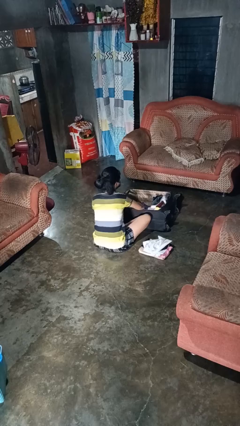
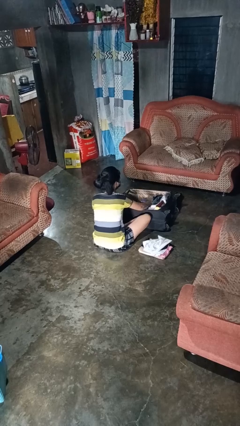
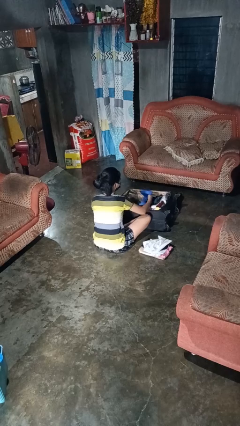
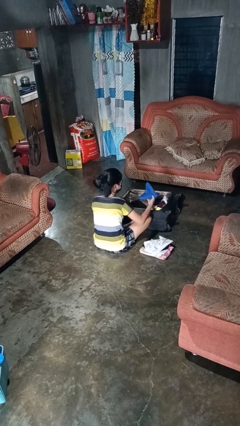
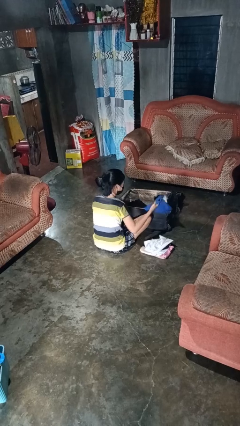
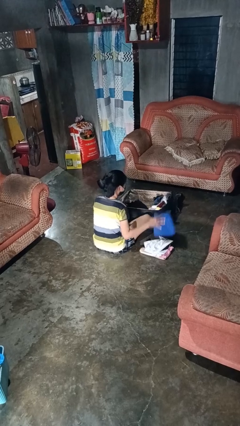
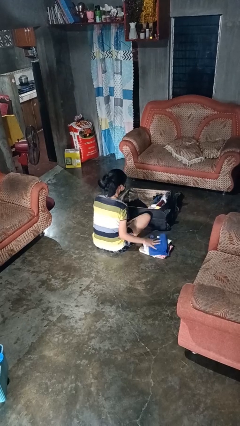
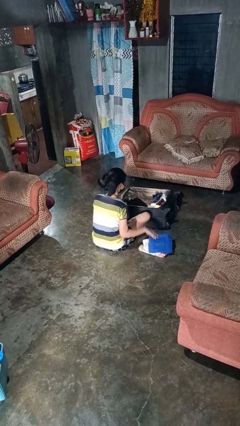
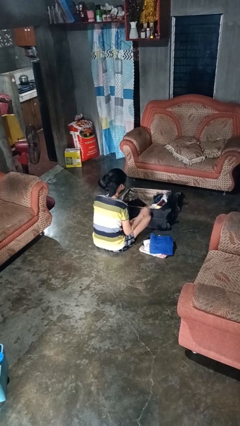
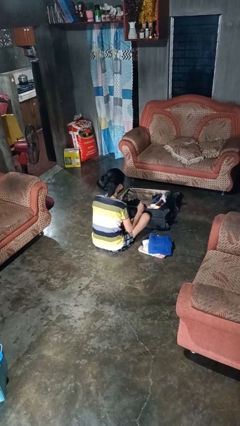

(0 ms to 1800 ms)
person unloads clothes from suitcase

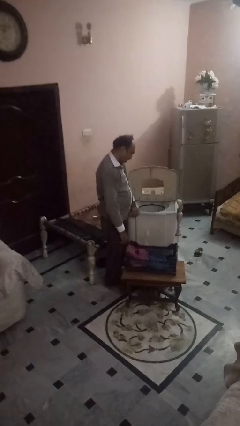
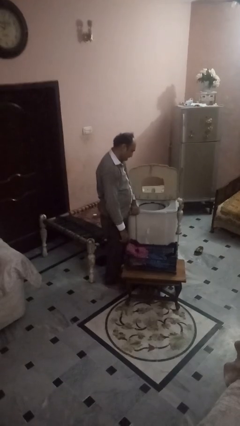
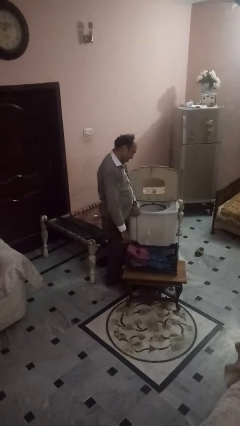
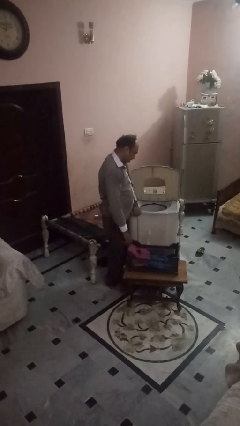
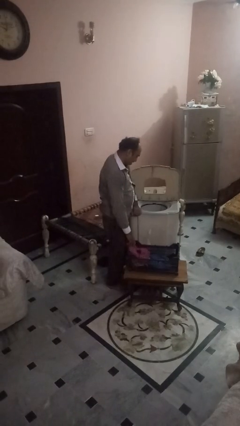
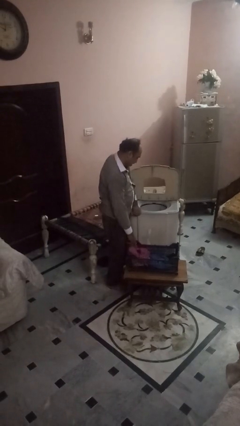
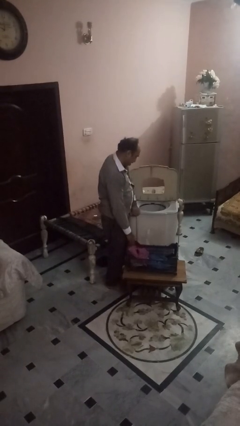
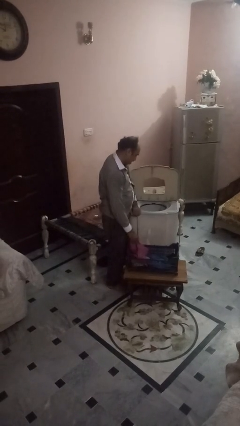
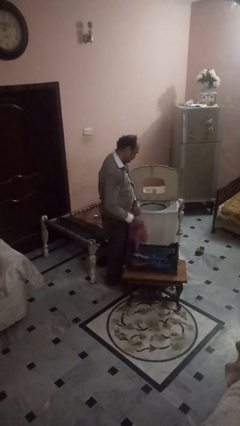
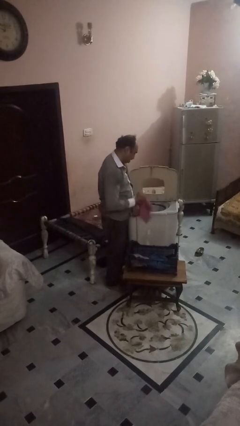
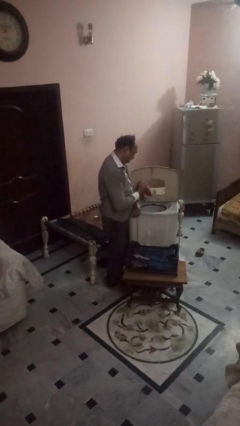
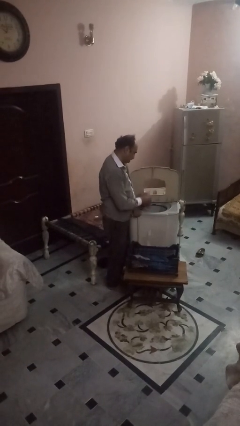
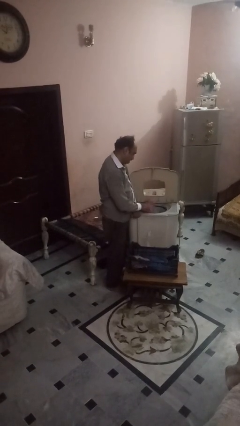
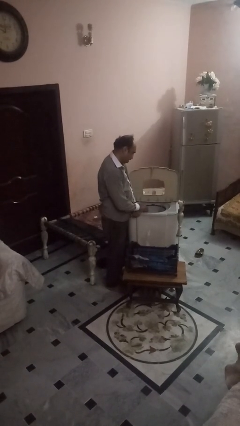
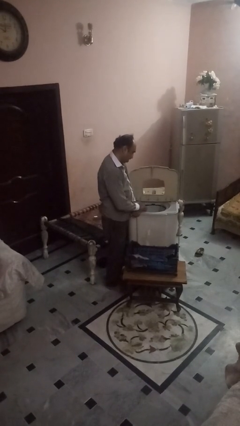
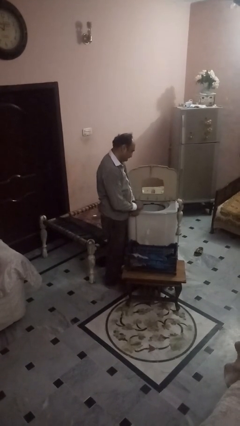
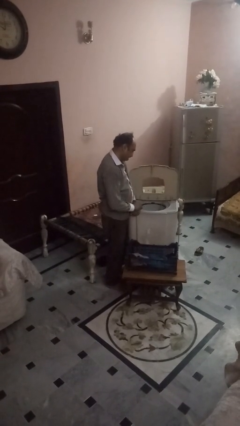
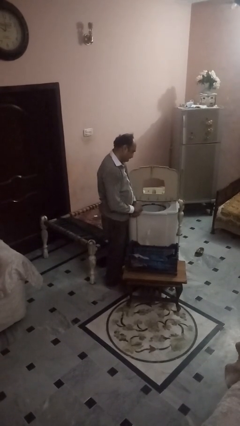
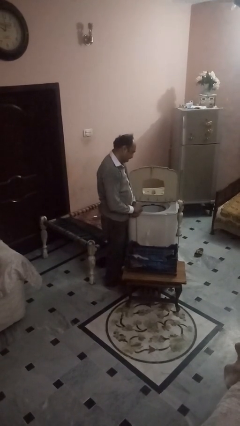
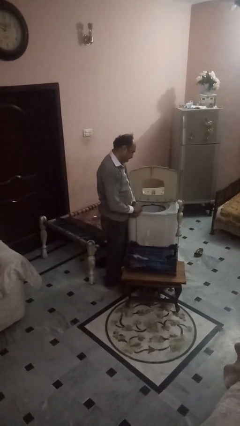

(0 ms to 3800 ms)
person loads dryer

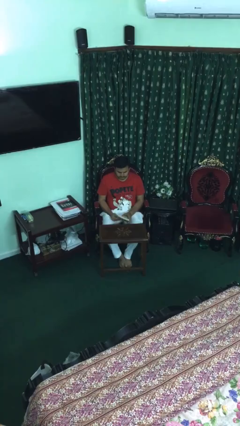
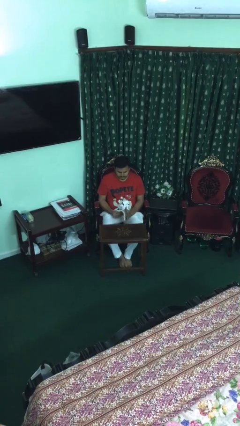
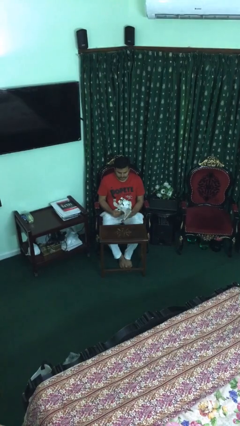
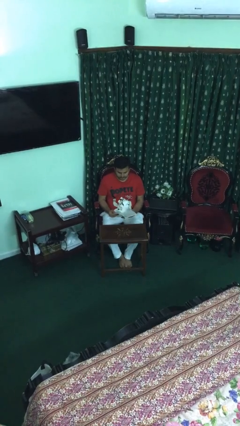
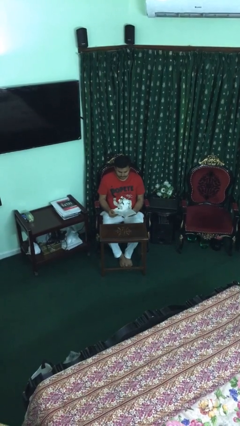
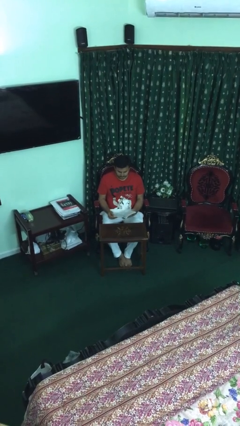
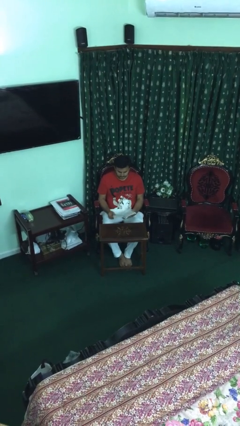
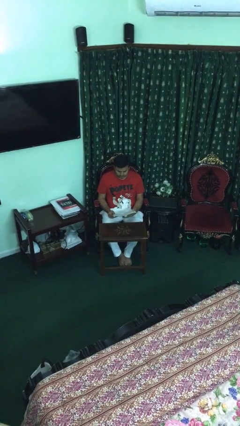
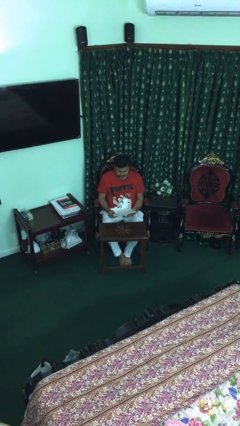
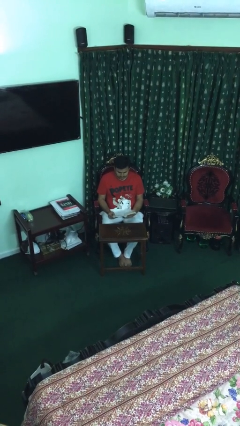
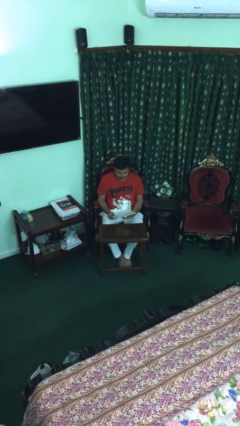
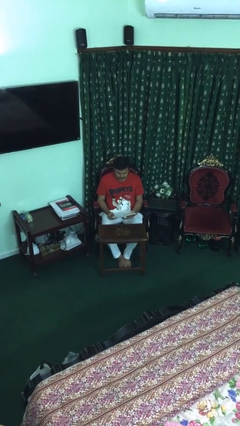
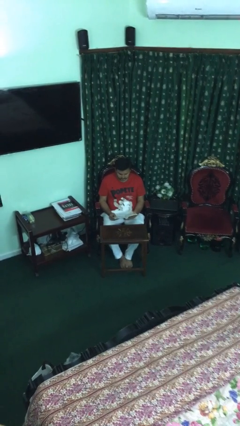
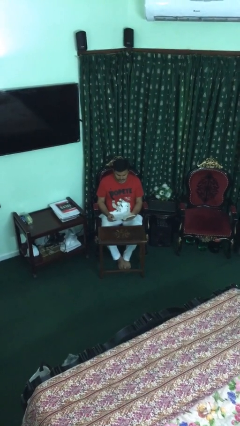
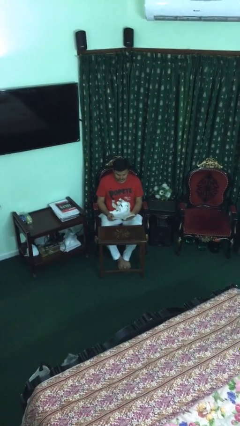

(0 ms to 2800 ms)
person reads document

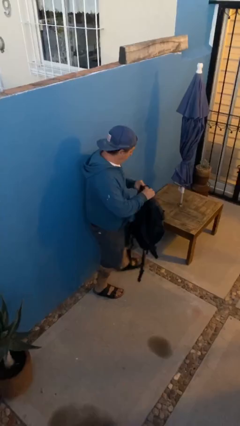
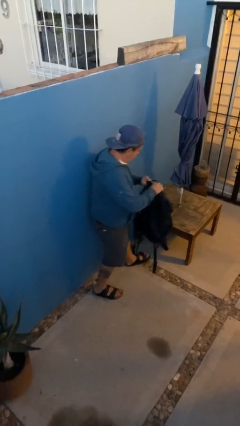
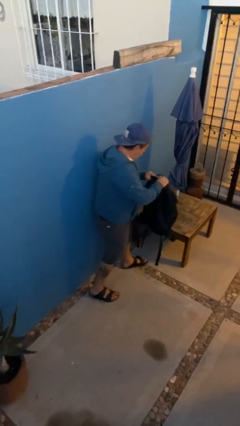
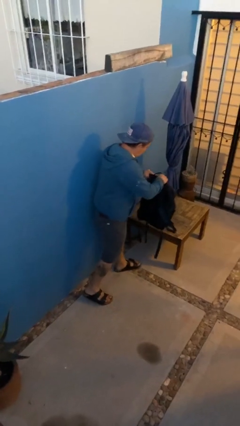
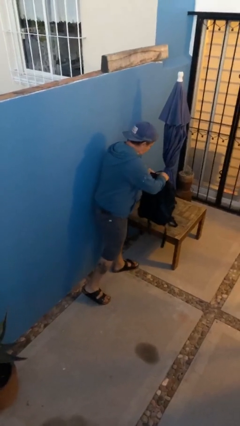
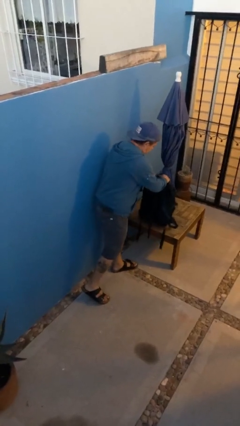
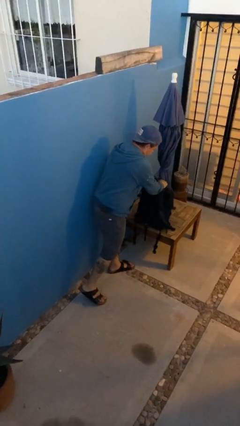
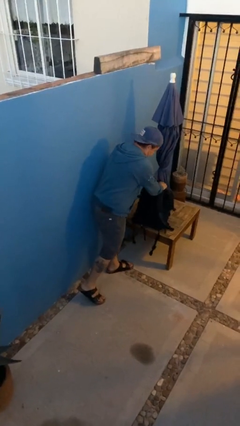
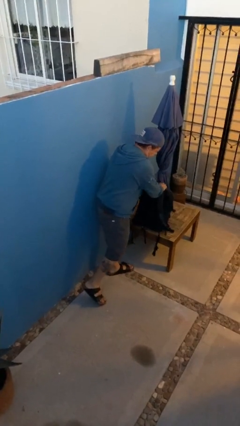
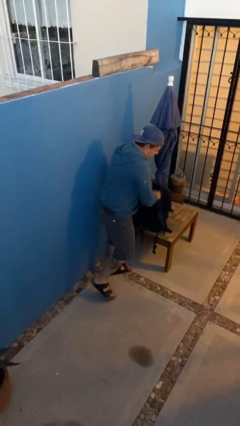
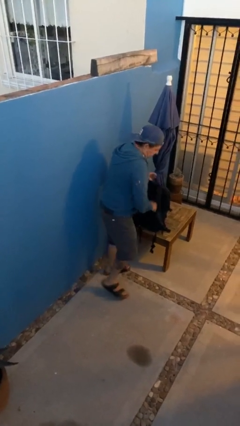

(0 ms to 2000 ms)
person puts down object on table

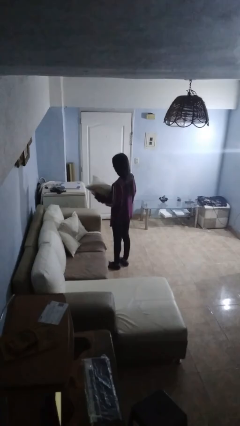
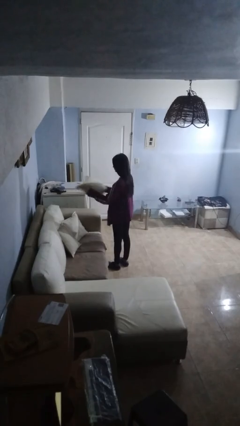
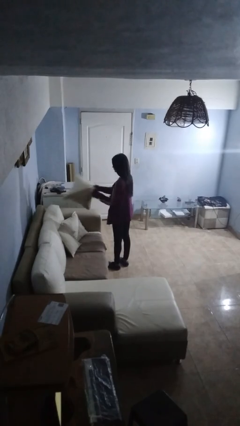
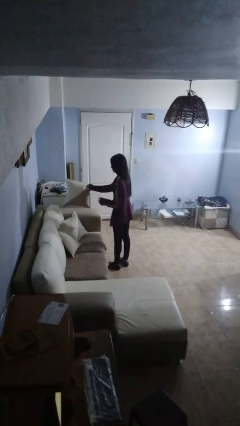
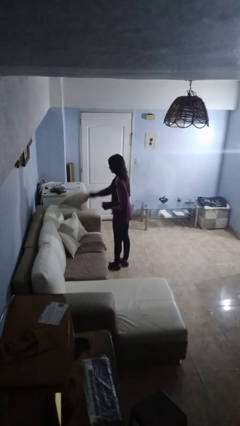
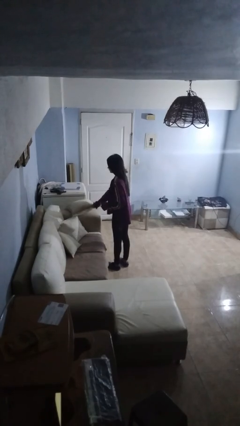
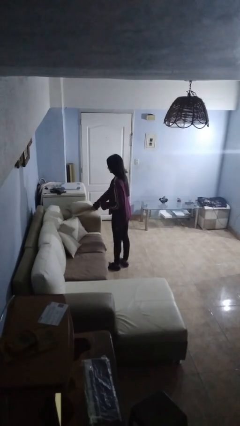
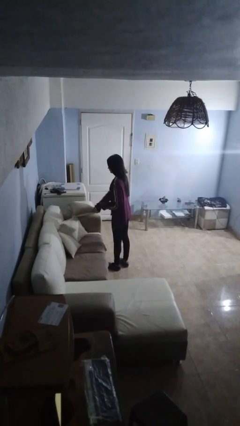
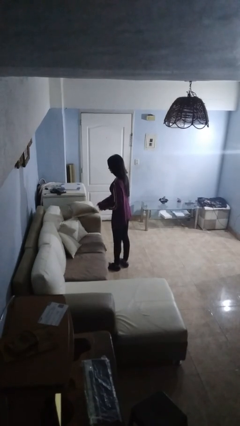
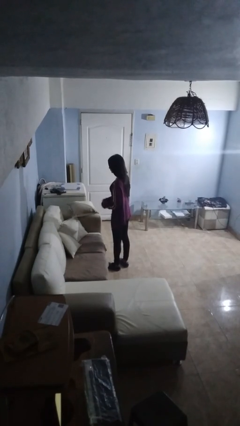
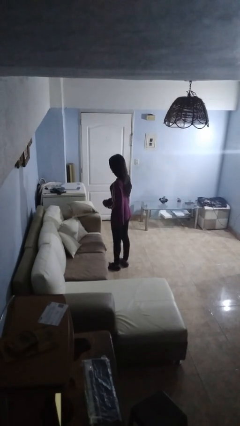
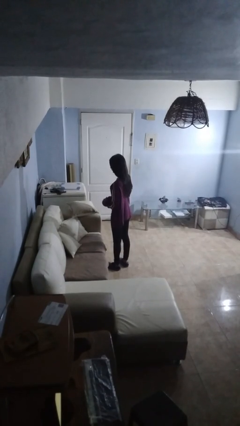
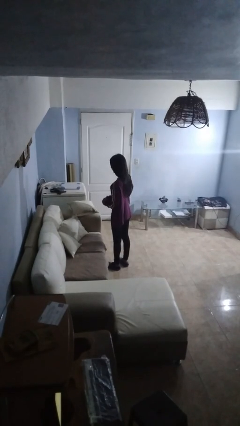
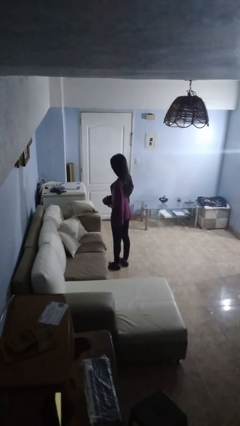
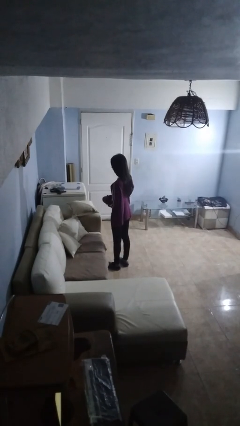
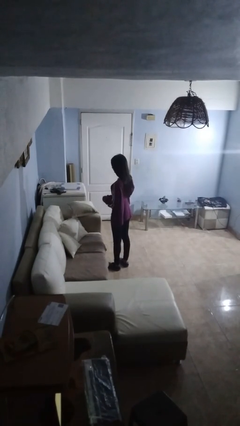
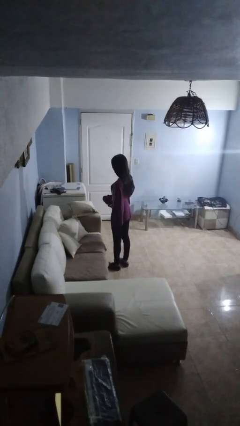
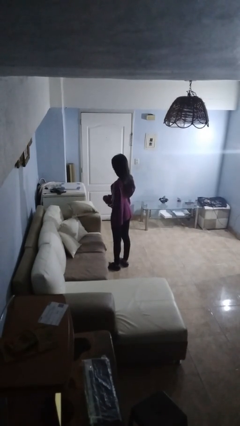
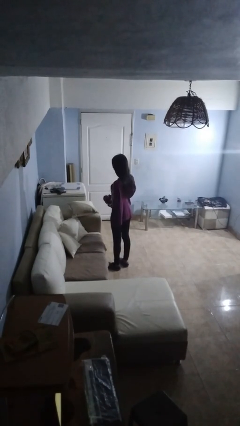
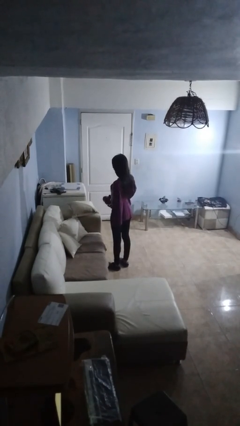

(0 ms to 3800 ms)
person picks up object from couch

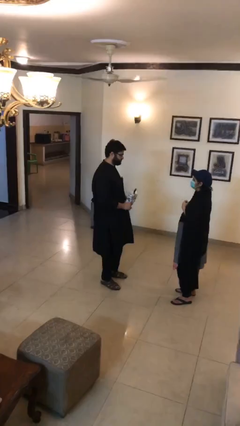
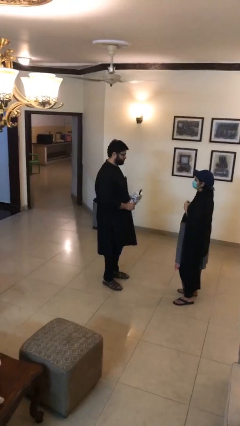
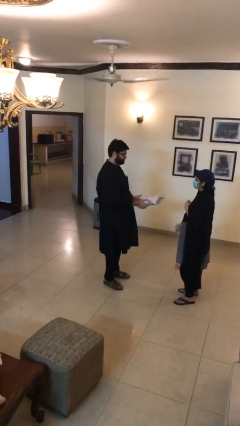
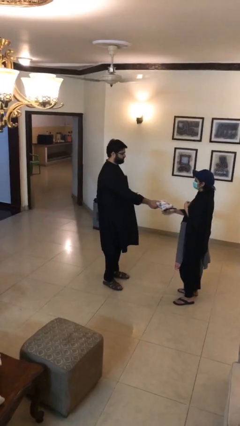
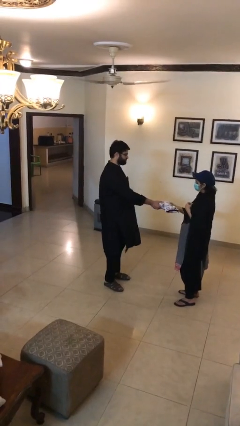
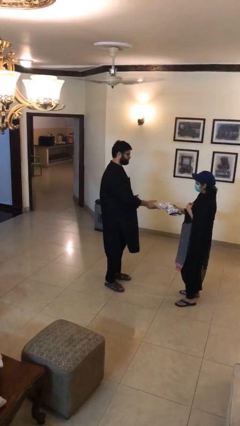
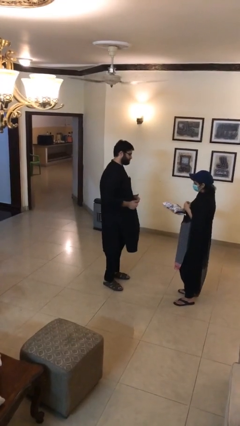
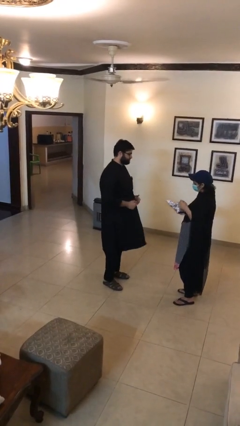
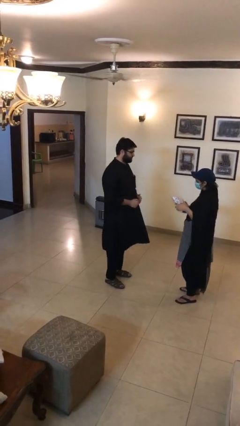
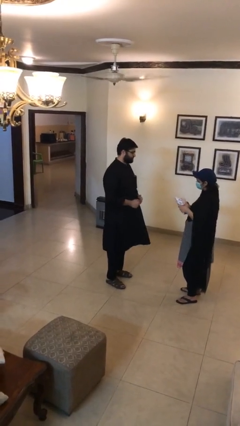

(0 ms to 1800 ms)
person transfers object to person

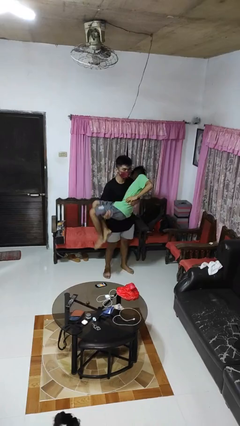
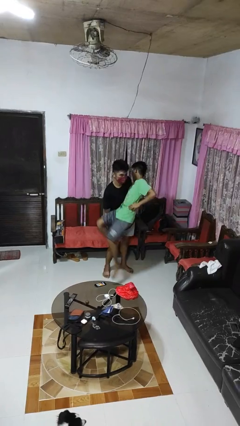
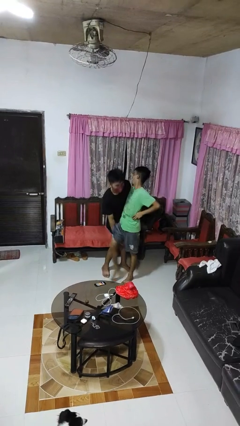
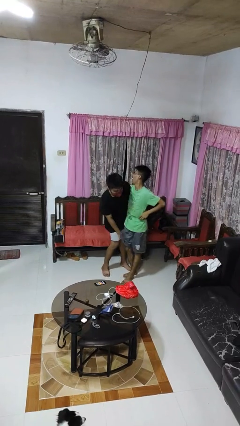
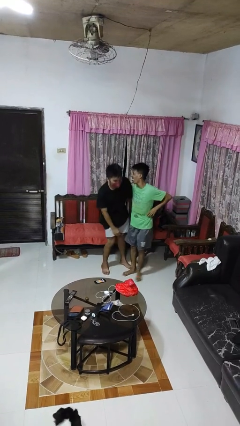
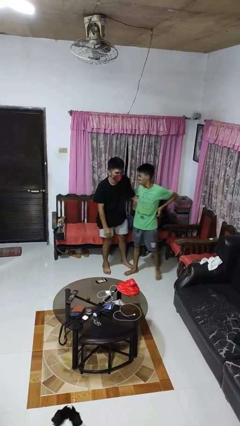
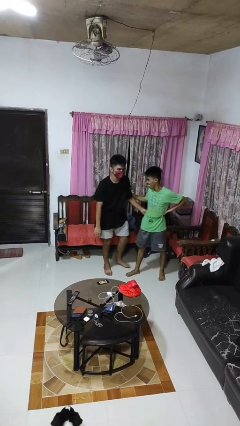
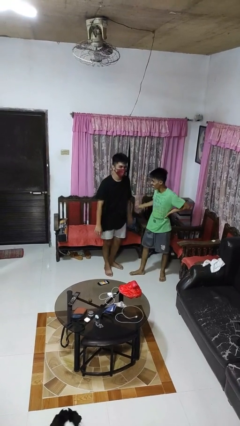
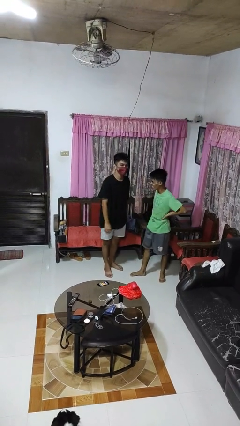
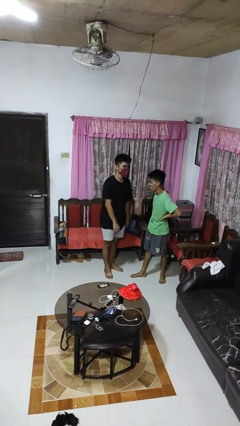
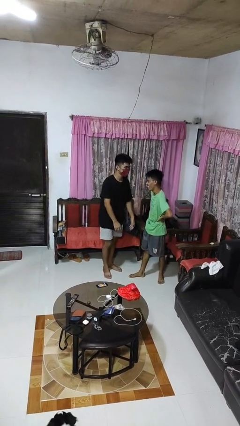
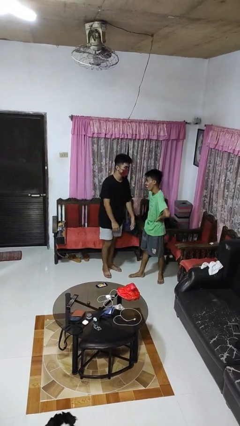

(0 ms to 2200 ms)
person puts down person
